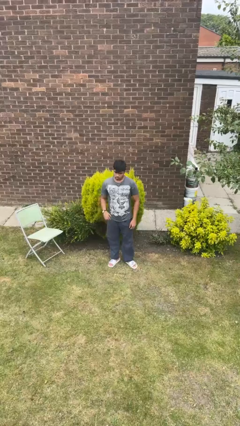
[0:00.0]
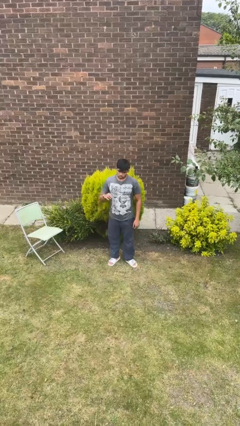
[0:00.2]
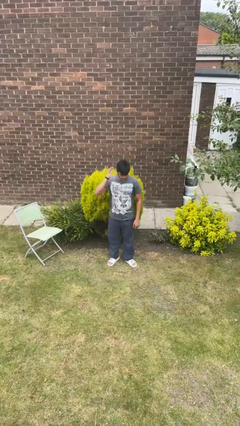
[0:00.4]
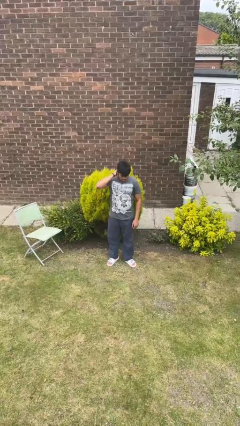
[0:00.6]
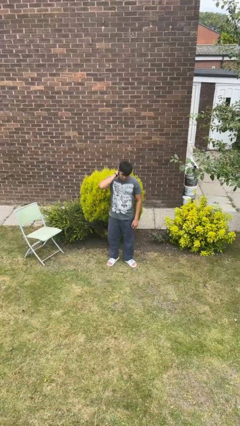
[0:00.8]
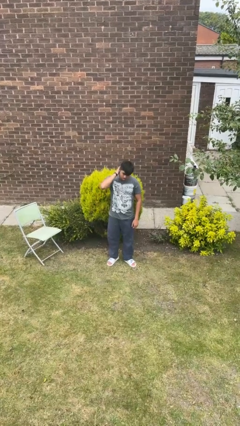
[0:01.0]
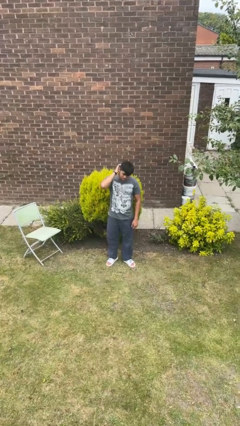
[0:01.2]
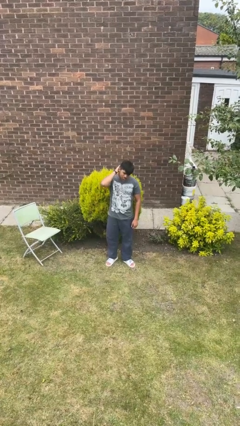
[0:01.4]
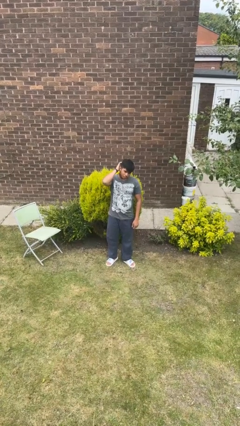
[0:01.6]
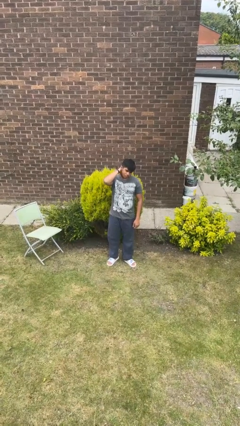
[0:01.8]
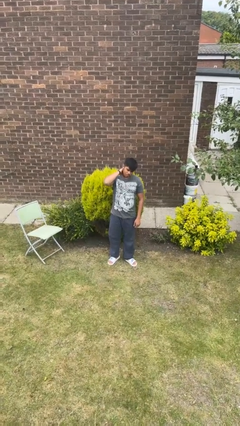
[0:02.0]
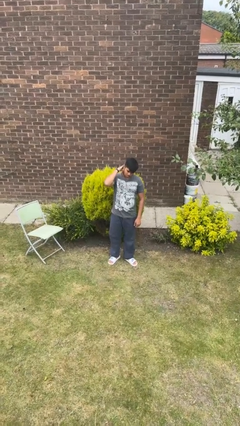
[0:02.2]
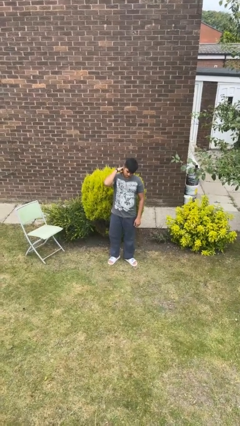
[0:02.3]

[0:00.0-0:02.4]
person scratches face

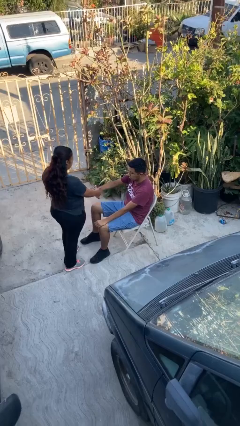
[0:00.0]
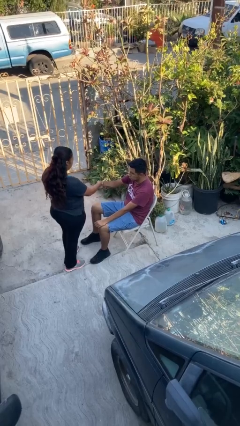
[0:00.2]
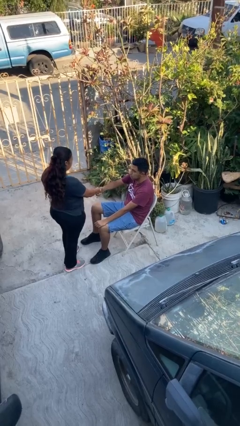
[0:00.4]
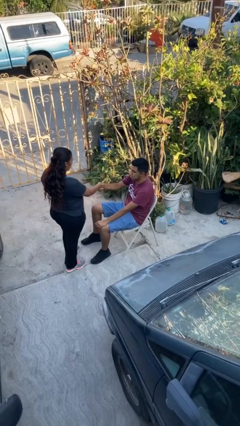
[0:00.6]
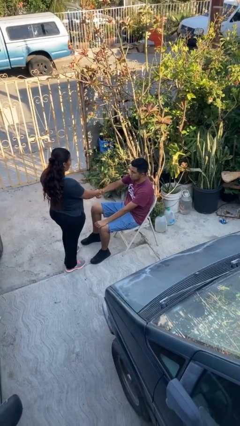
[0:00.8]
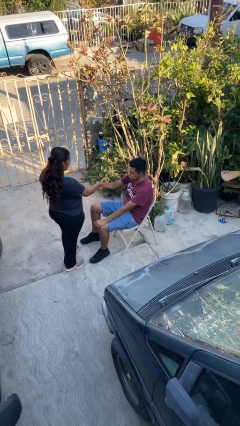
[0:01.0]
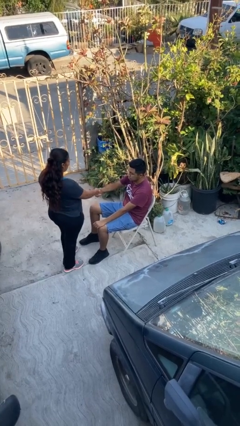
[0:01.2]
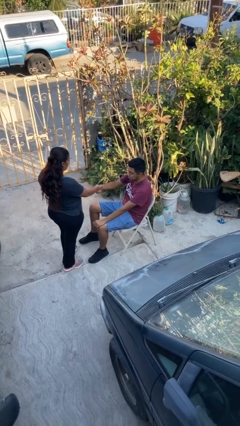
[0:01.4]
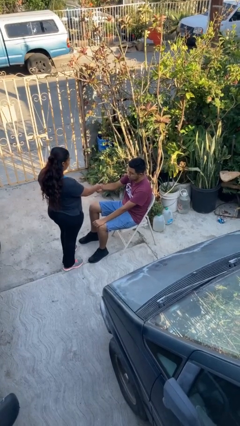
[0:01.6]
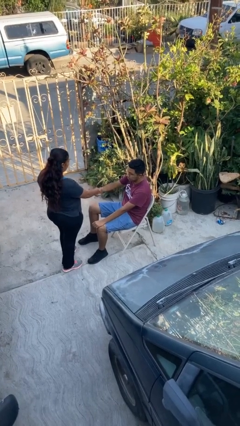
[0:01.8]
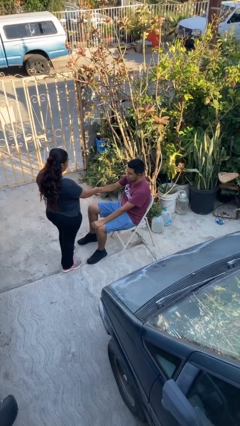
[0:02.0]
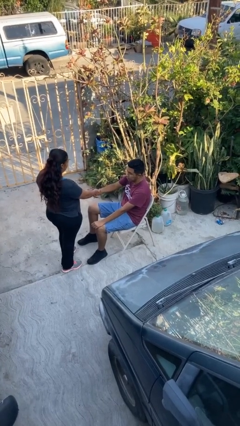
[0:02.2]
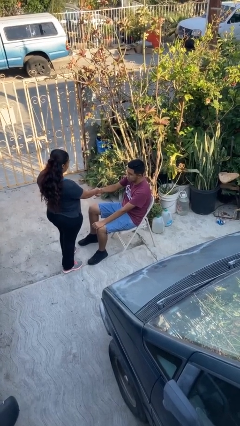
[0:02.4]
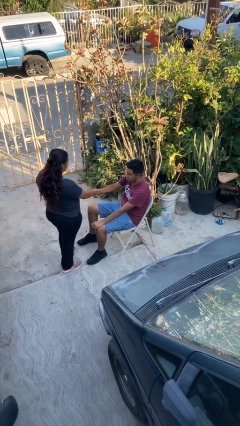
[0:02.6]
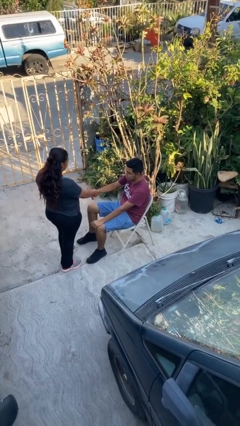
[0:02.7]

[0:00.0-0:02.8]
person shakes hand

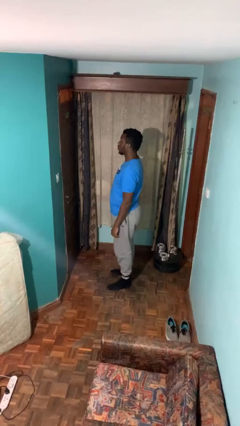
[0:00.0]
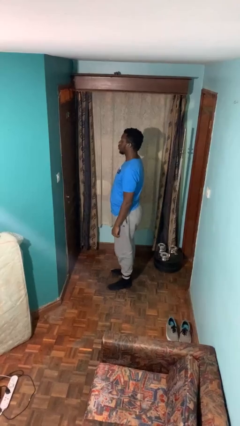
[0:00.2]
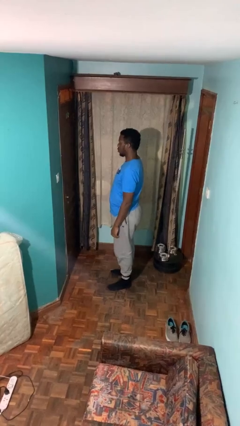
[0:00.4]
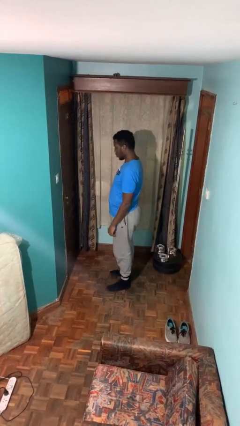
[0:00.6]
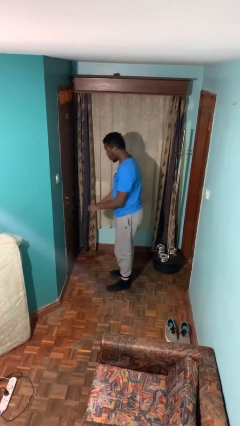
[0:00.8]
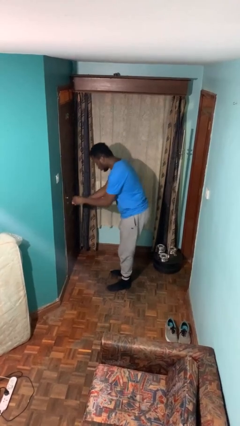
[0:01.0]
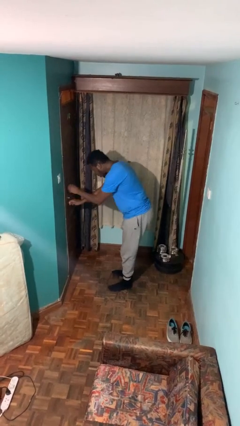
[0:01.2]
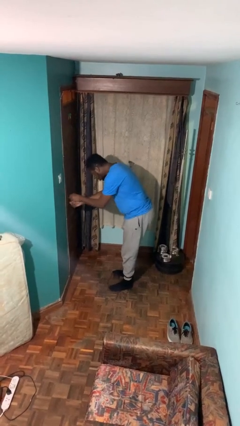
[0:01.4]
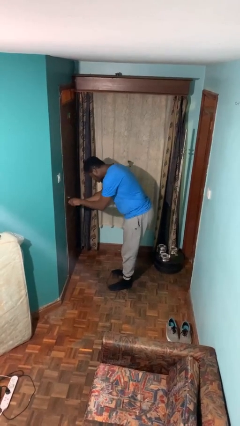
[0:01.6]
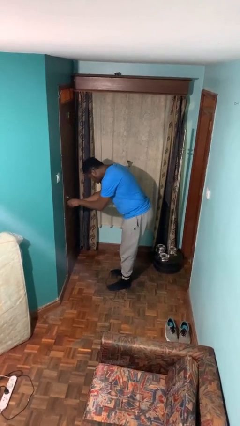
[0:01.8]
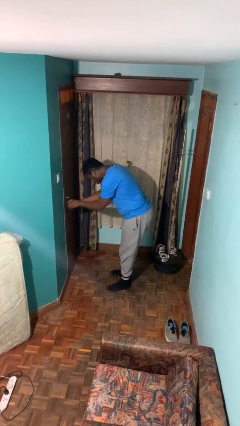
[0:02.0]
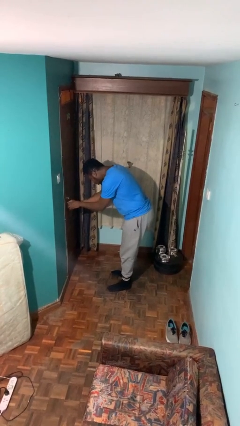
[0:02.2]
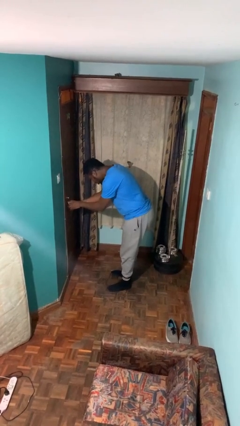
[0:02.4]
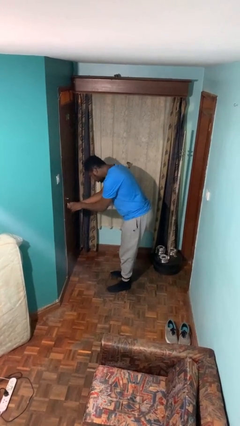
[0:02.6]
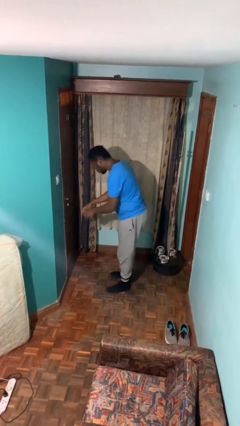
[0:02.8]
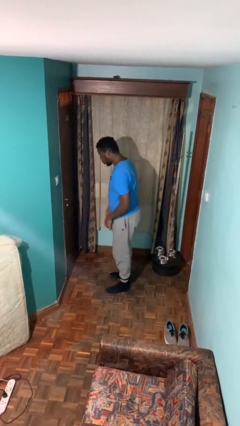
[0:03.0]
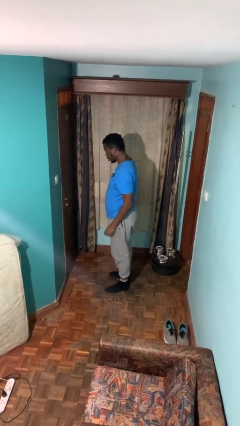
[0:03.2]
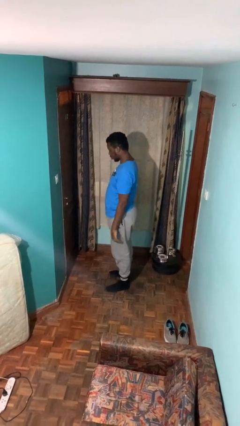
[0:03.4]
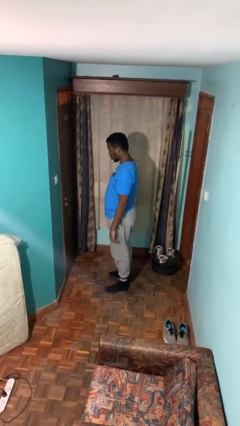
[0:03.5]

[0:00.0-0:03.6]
person unlocks door with keys

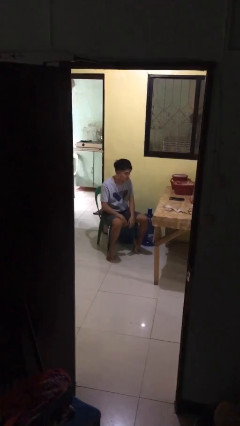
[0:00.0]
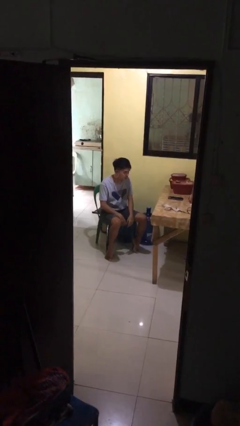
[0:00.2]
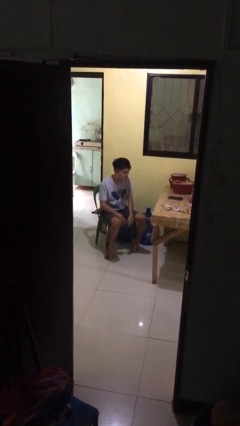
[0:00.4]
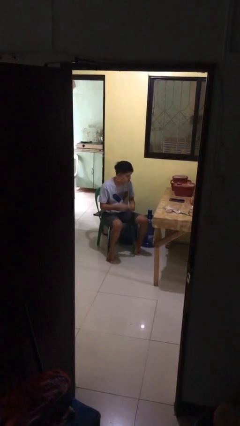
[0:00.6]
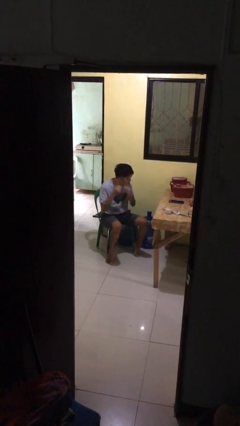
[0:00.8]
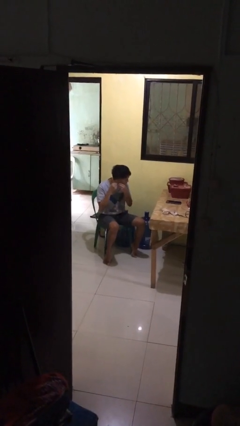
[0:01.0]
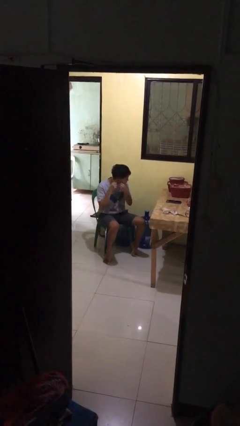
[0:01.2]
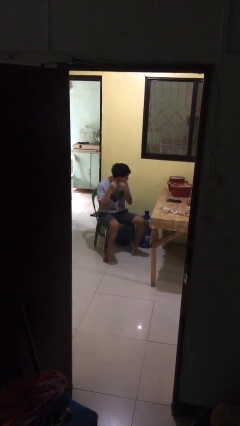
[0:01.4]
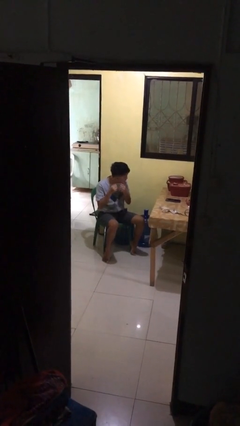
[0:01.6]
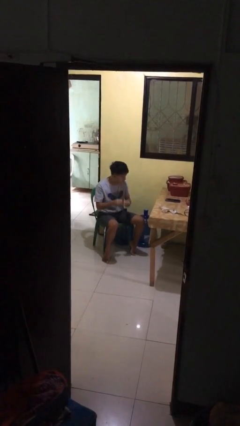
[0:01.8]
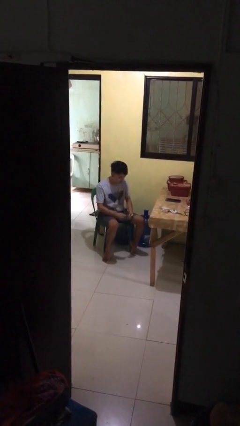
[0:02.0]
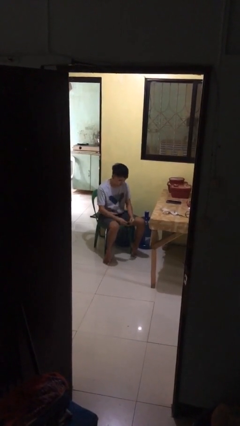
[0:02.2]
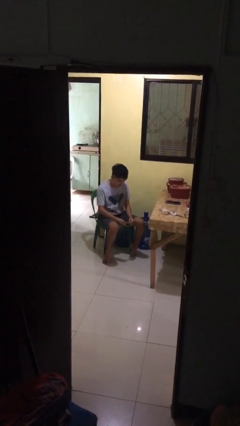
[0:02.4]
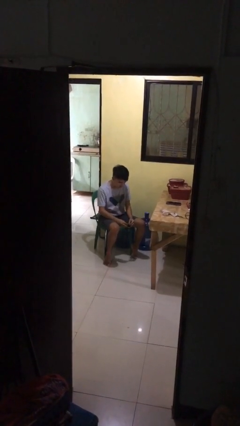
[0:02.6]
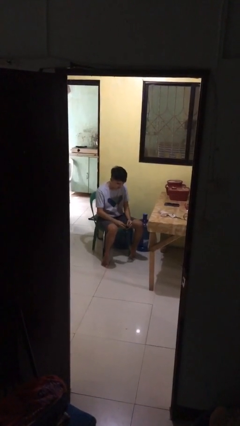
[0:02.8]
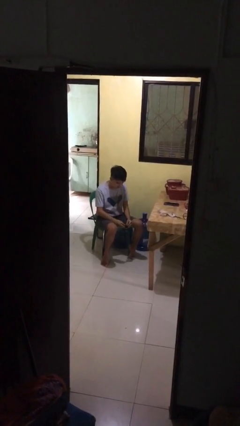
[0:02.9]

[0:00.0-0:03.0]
person takes off earrings

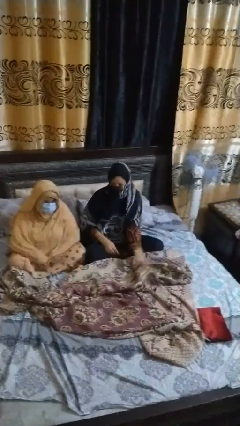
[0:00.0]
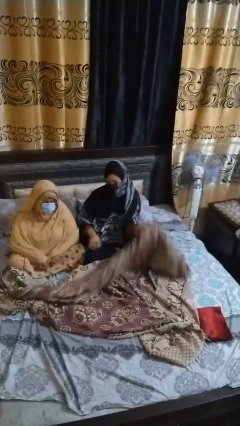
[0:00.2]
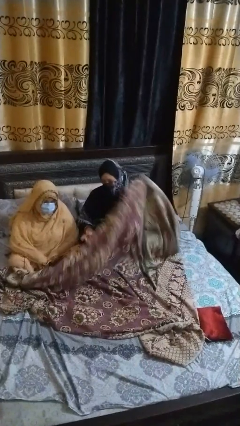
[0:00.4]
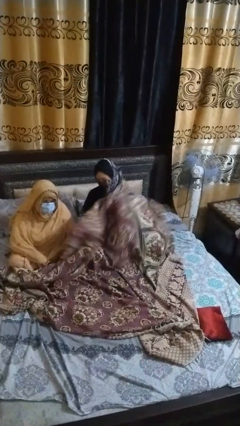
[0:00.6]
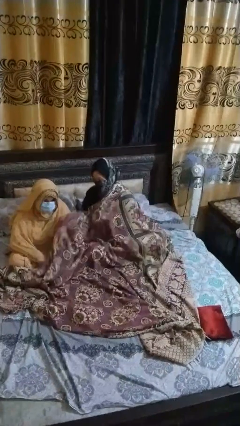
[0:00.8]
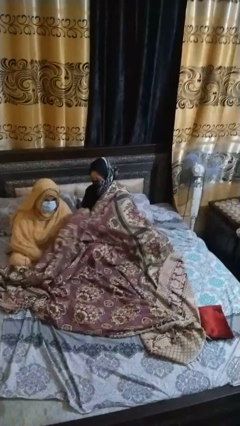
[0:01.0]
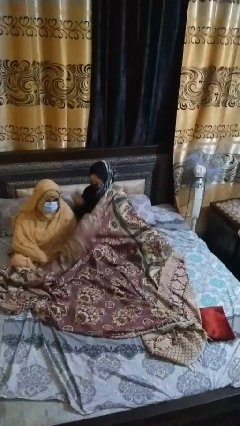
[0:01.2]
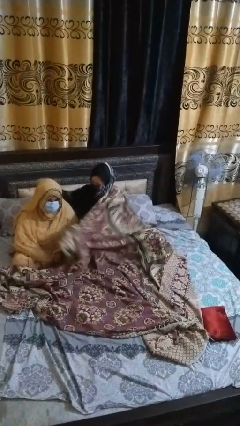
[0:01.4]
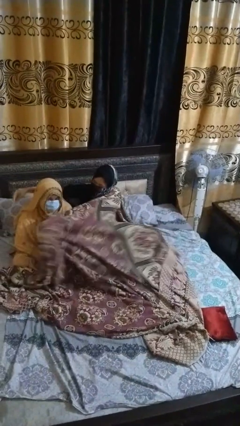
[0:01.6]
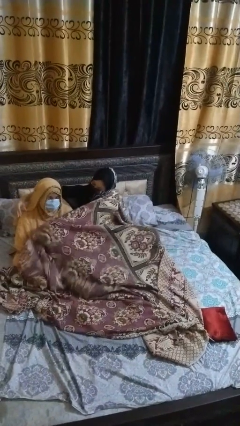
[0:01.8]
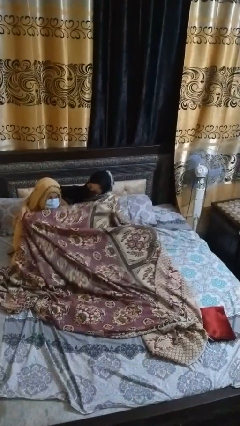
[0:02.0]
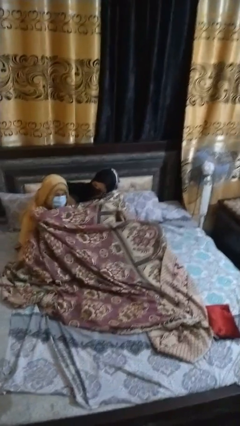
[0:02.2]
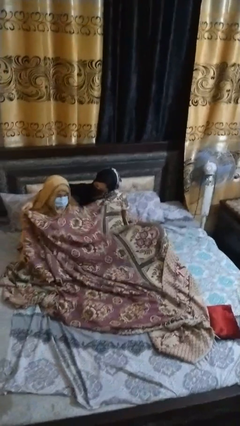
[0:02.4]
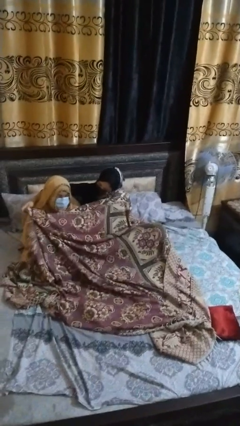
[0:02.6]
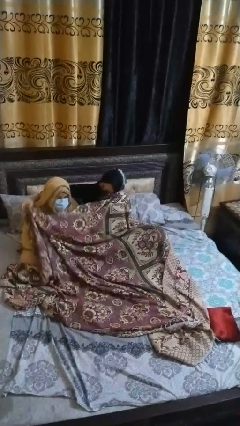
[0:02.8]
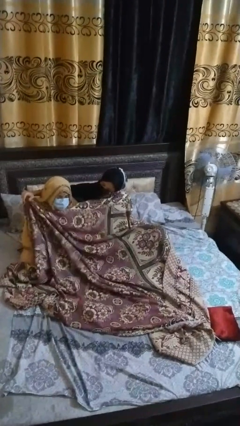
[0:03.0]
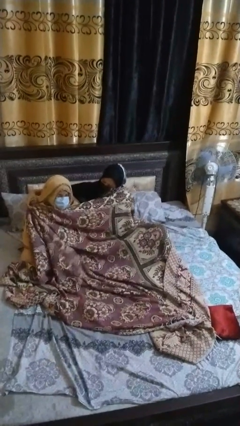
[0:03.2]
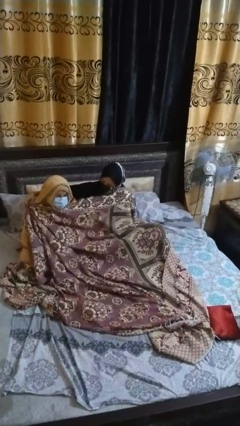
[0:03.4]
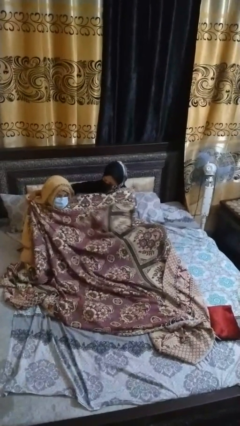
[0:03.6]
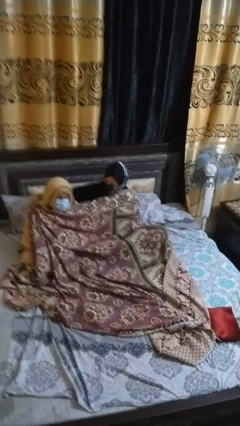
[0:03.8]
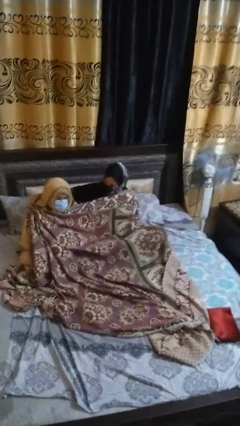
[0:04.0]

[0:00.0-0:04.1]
person covers friend with blanket

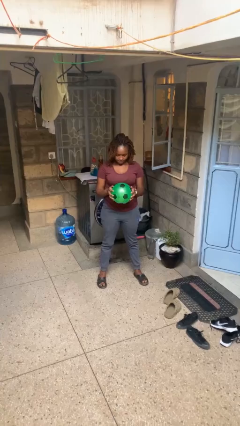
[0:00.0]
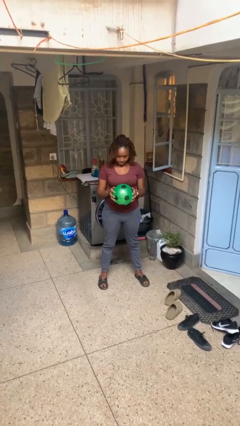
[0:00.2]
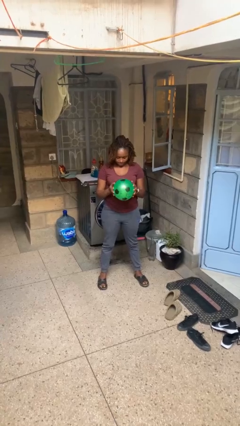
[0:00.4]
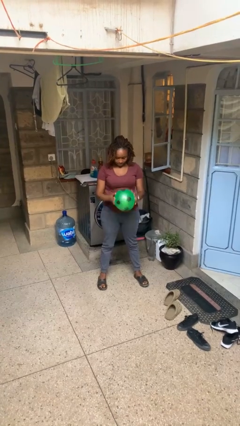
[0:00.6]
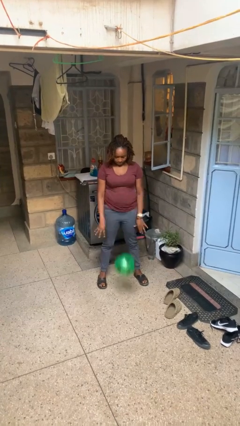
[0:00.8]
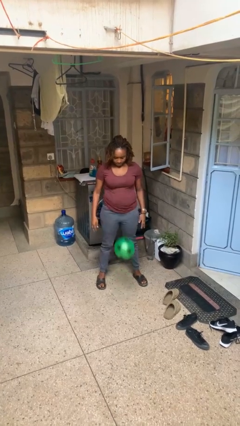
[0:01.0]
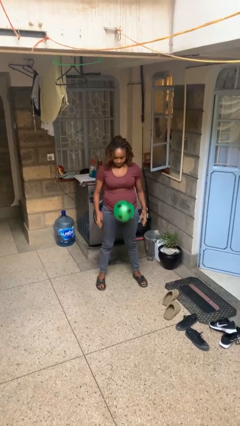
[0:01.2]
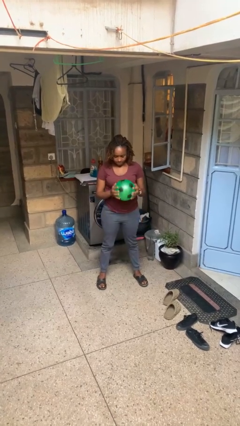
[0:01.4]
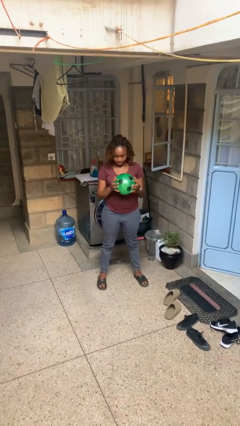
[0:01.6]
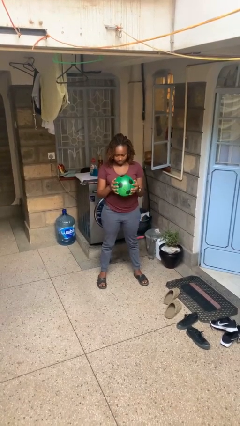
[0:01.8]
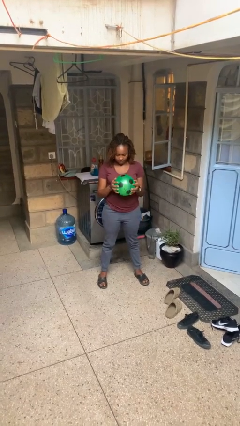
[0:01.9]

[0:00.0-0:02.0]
person bounces ball on floor
